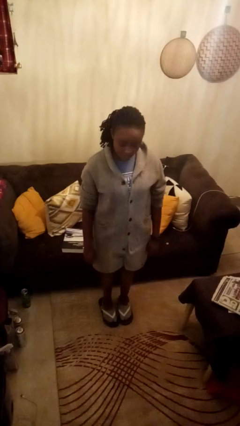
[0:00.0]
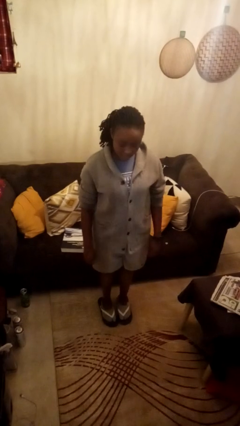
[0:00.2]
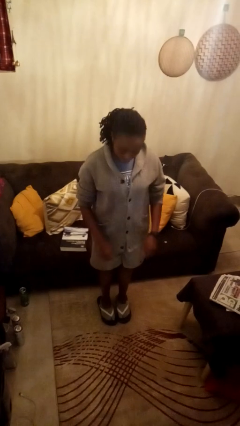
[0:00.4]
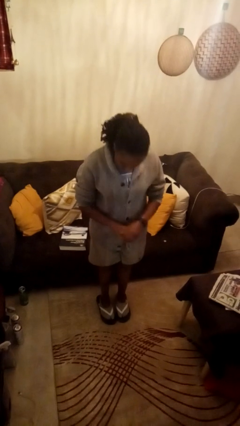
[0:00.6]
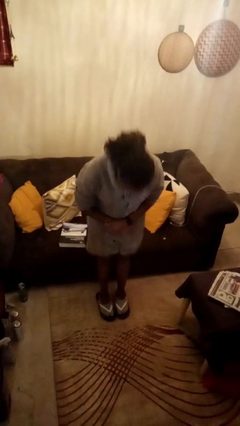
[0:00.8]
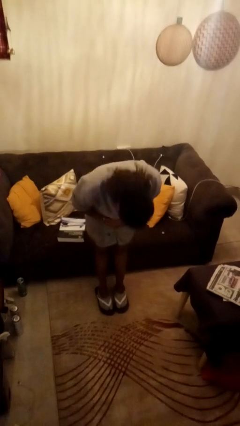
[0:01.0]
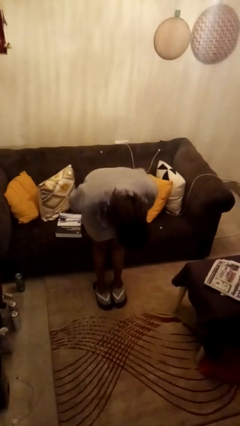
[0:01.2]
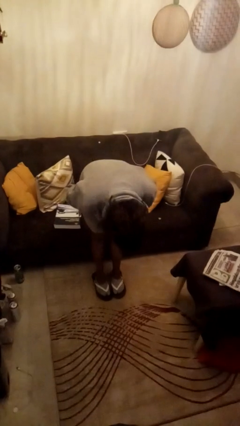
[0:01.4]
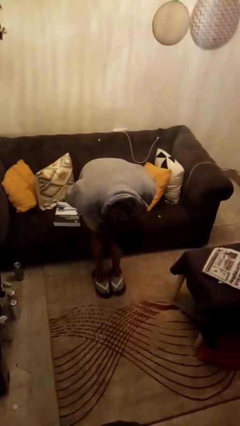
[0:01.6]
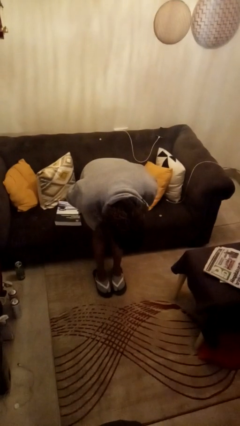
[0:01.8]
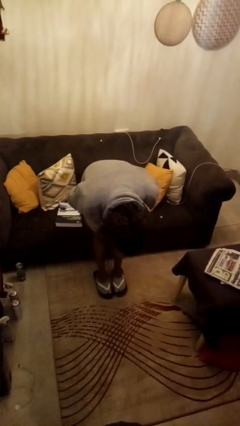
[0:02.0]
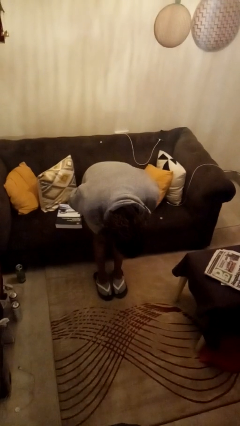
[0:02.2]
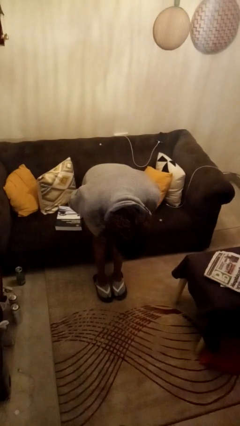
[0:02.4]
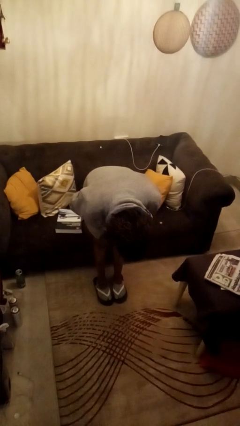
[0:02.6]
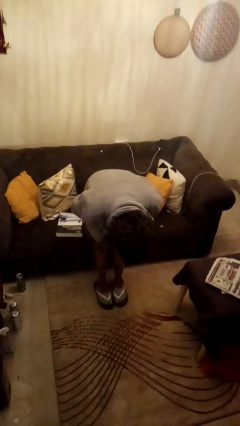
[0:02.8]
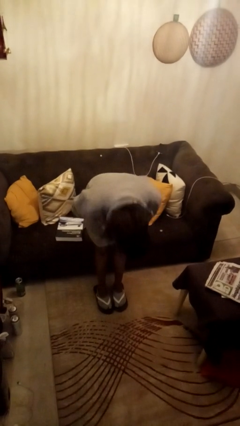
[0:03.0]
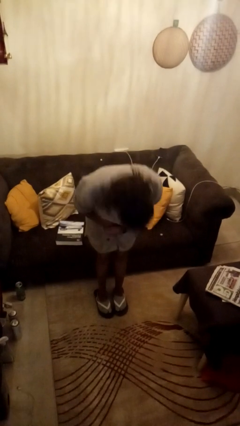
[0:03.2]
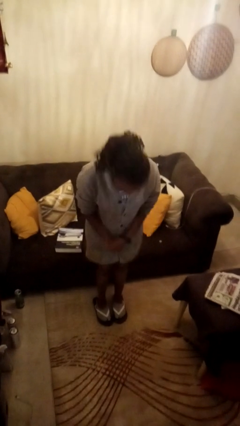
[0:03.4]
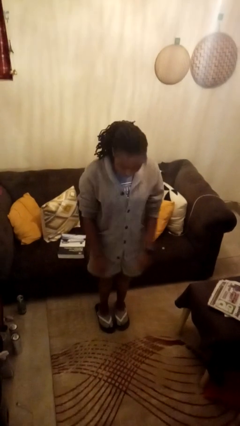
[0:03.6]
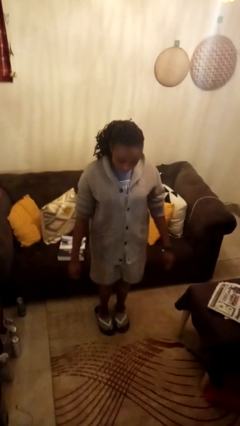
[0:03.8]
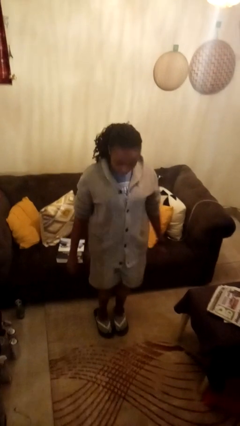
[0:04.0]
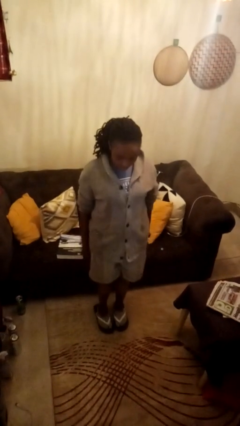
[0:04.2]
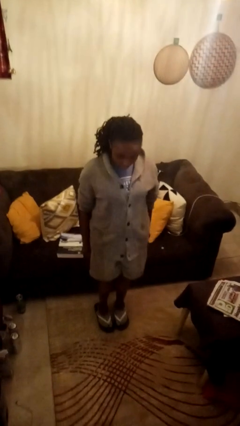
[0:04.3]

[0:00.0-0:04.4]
person bows

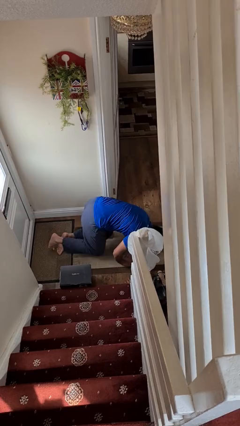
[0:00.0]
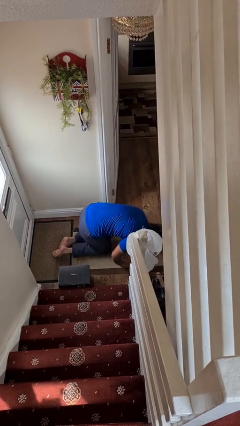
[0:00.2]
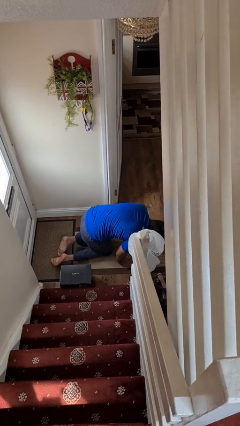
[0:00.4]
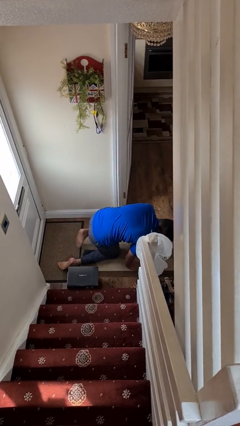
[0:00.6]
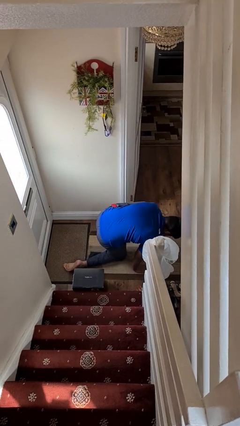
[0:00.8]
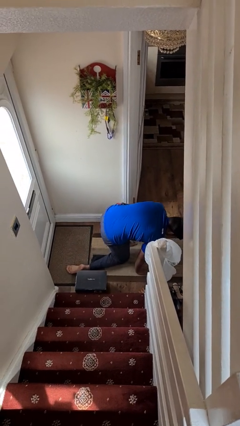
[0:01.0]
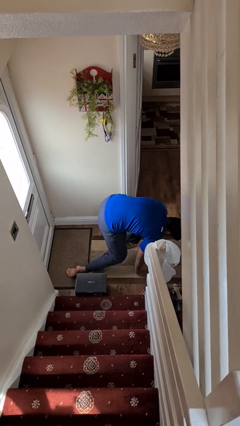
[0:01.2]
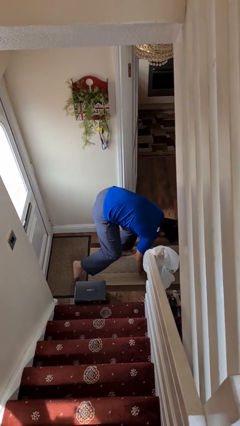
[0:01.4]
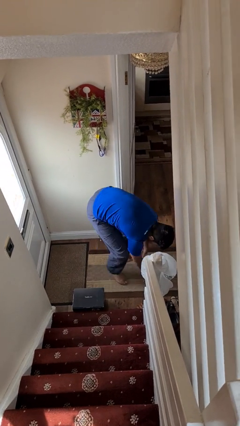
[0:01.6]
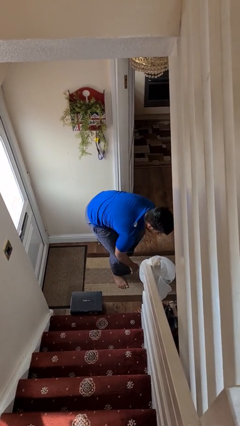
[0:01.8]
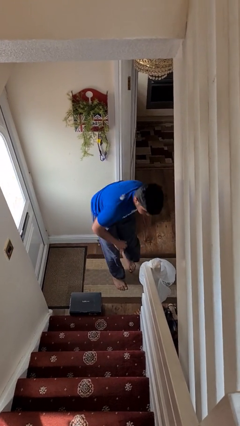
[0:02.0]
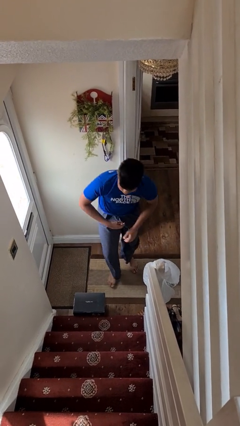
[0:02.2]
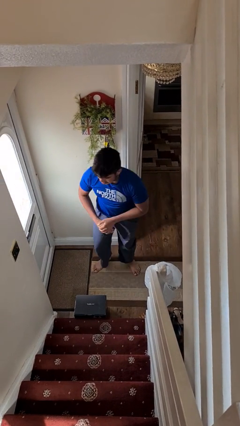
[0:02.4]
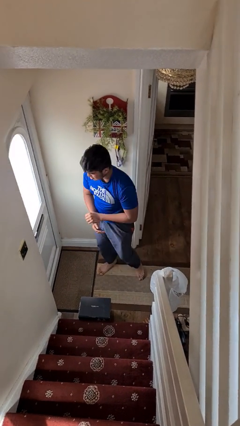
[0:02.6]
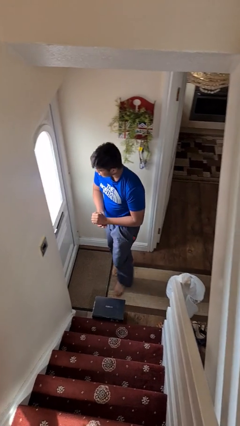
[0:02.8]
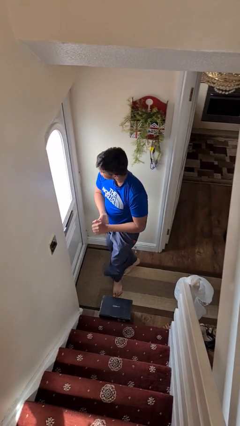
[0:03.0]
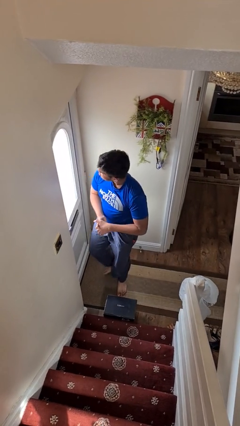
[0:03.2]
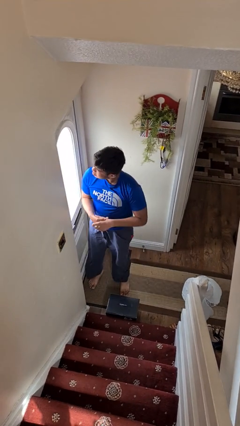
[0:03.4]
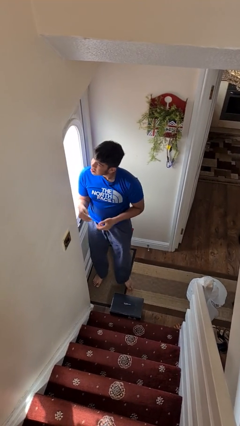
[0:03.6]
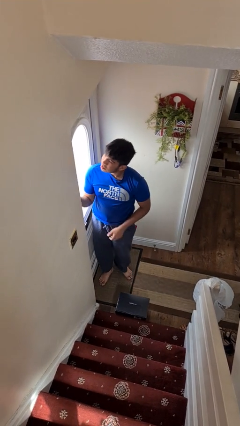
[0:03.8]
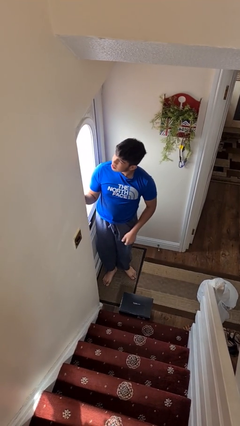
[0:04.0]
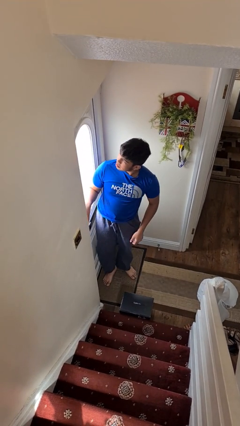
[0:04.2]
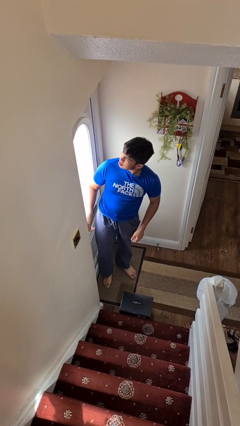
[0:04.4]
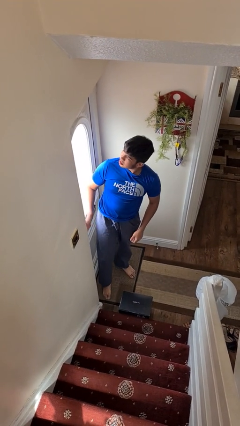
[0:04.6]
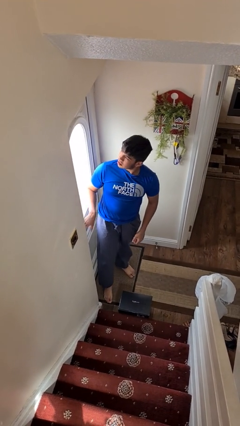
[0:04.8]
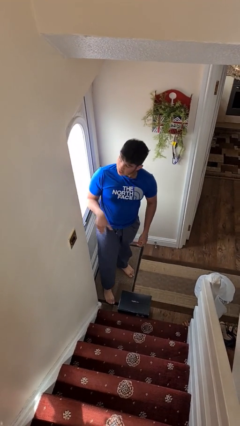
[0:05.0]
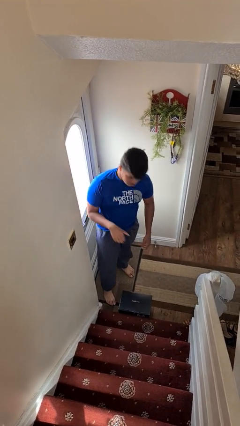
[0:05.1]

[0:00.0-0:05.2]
person stands up from floor

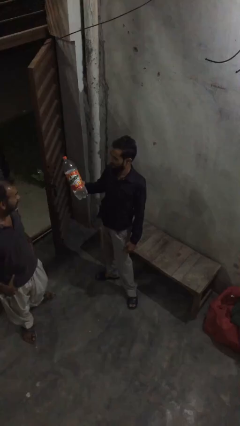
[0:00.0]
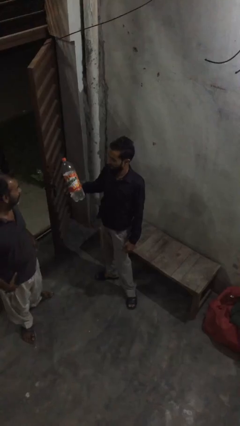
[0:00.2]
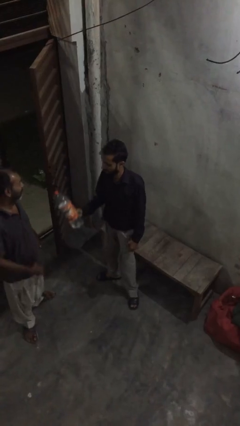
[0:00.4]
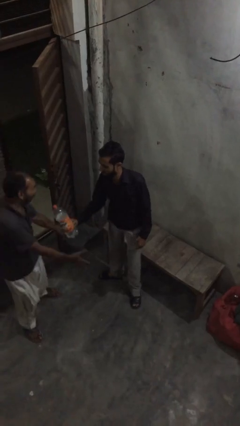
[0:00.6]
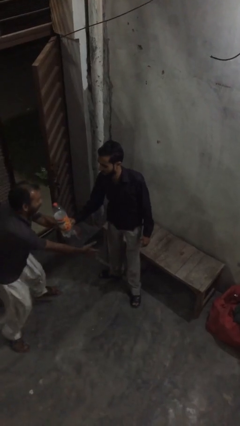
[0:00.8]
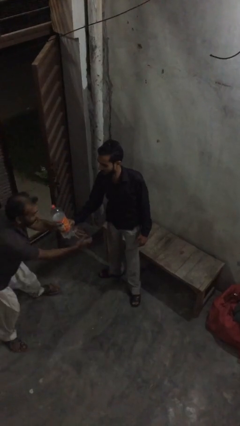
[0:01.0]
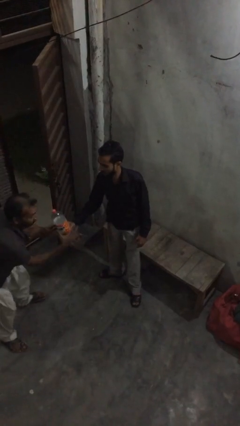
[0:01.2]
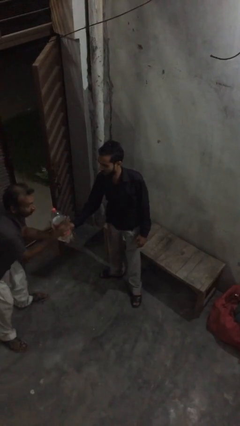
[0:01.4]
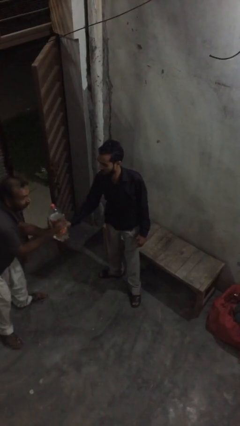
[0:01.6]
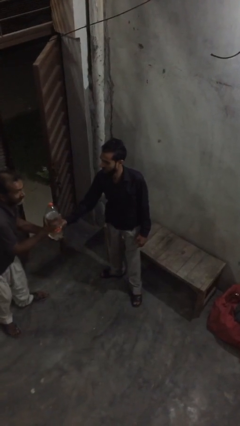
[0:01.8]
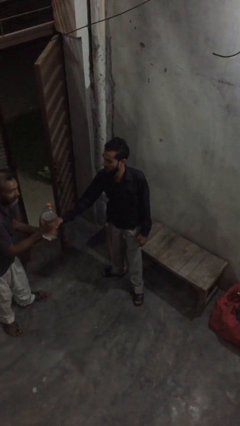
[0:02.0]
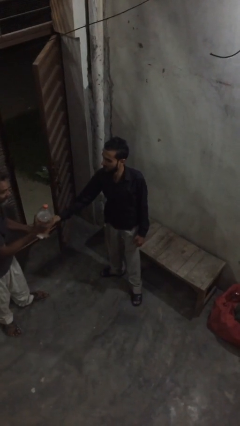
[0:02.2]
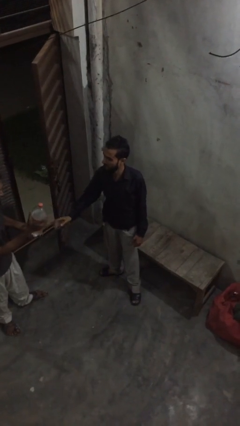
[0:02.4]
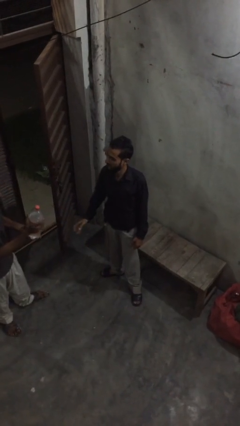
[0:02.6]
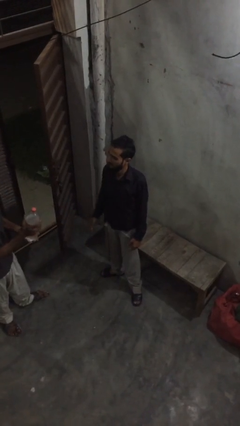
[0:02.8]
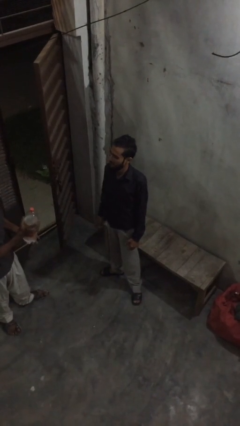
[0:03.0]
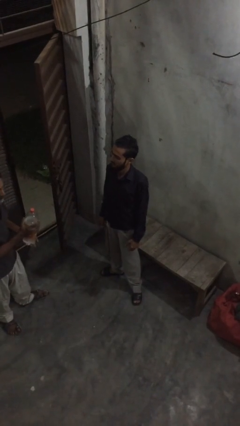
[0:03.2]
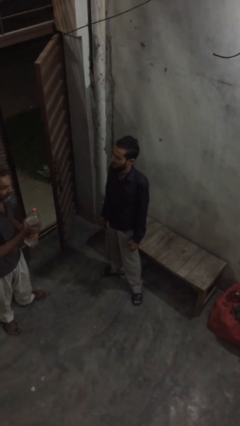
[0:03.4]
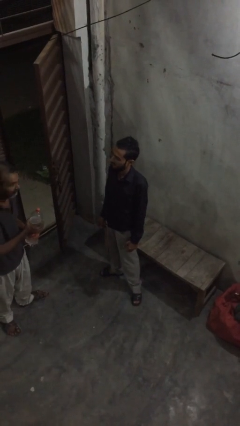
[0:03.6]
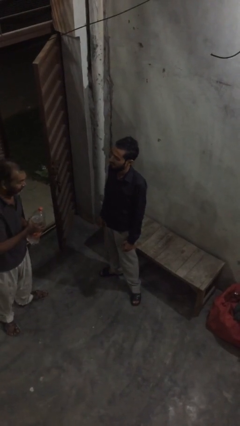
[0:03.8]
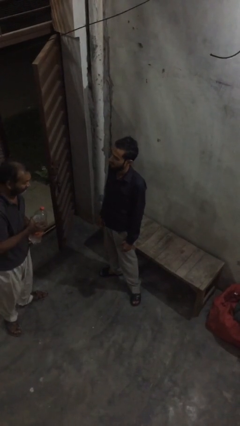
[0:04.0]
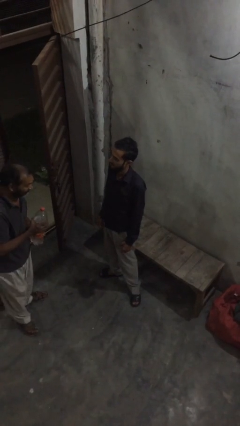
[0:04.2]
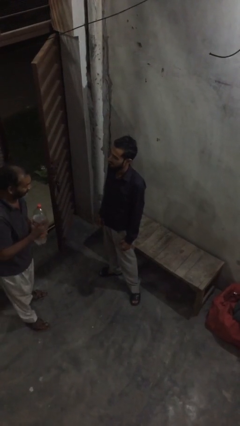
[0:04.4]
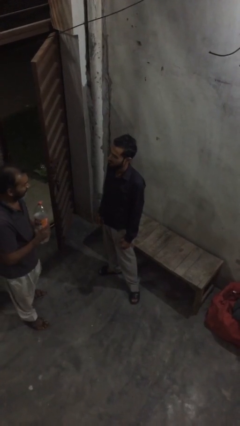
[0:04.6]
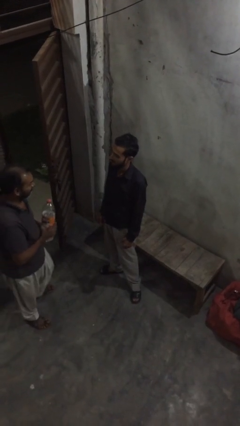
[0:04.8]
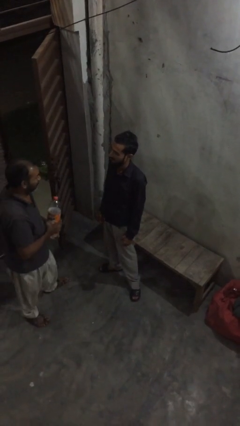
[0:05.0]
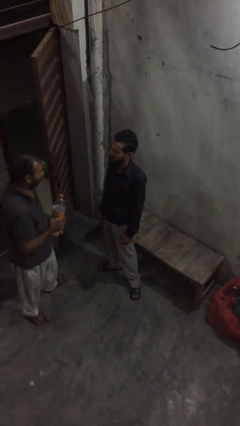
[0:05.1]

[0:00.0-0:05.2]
person transfers object to person

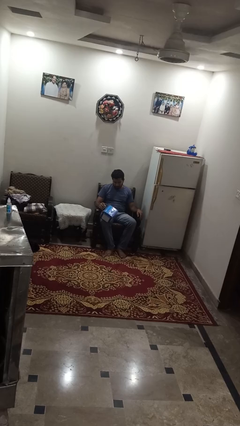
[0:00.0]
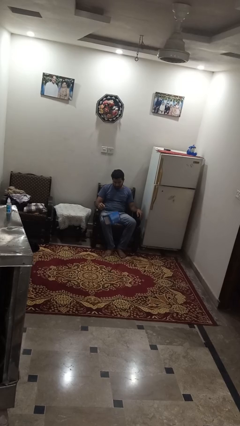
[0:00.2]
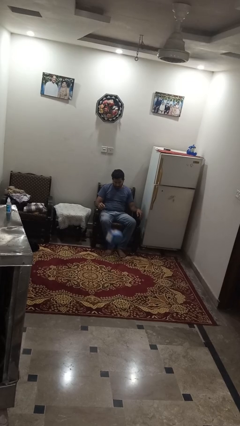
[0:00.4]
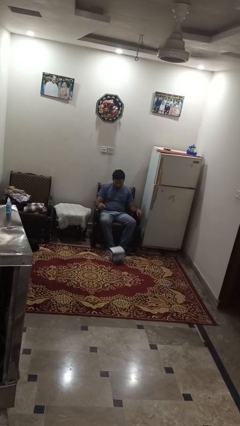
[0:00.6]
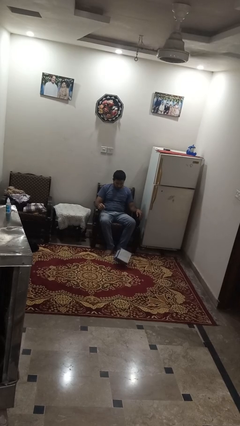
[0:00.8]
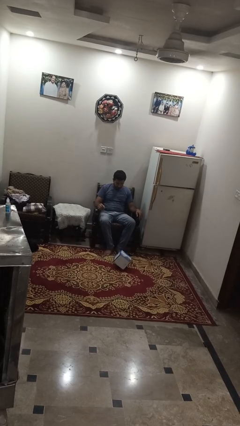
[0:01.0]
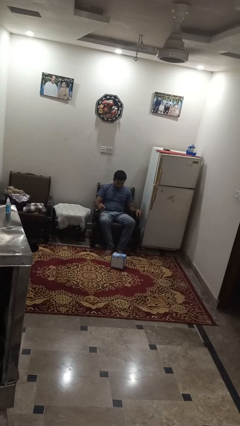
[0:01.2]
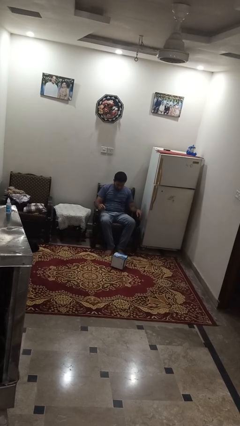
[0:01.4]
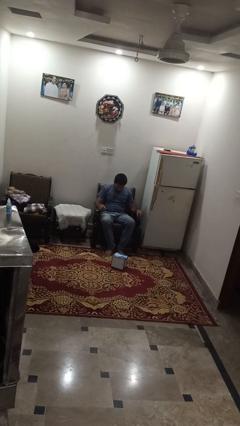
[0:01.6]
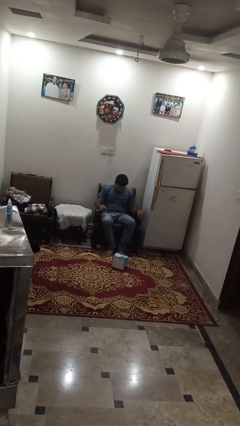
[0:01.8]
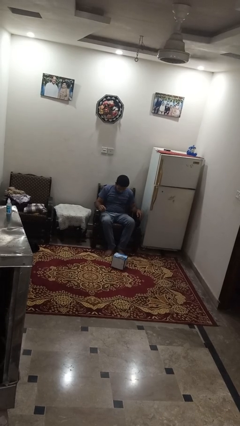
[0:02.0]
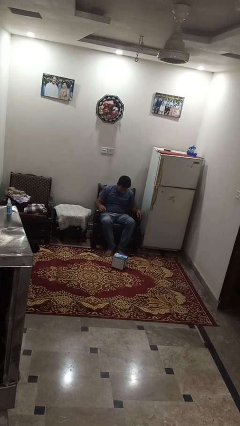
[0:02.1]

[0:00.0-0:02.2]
person drops object

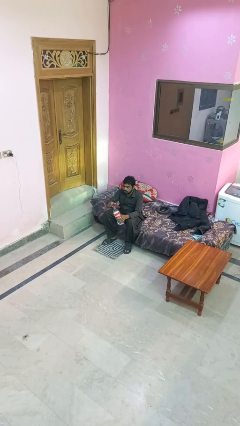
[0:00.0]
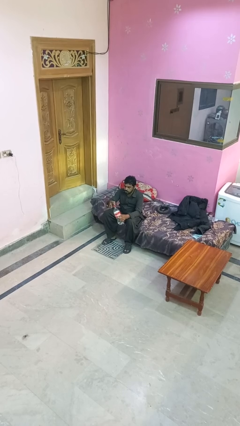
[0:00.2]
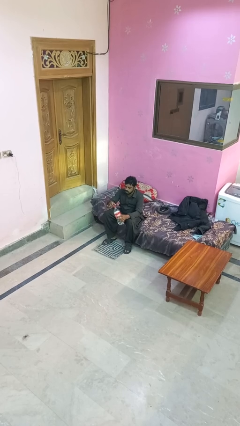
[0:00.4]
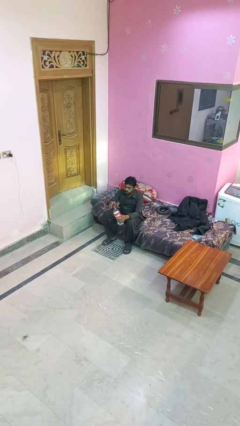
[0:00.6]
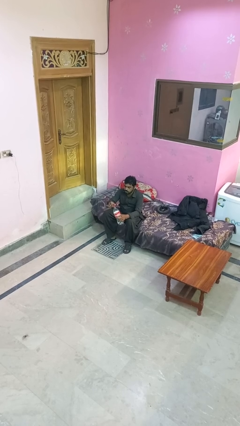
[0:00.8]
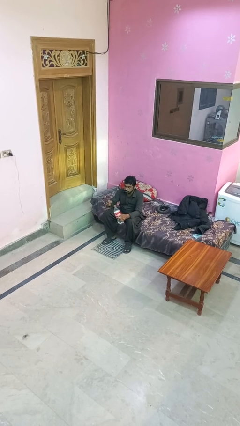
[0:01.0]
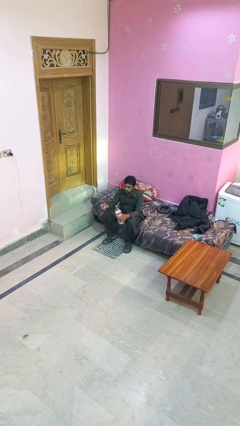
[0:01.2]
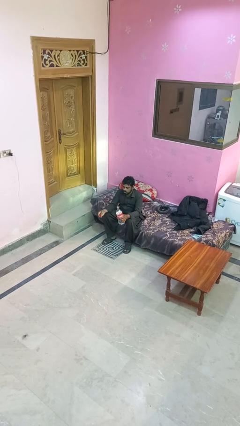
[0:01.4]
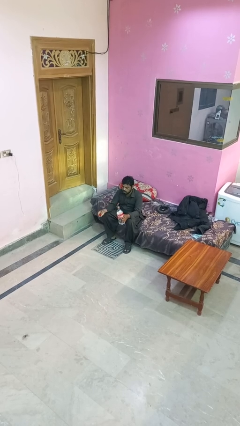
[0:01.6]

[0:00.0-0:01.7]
person unscrews lid from bottle
